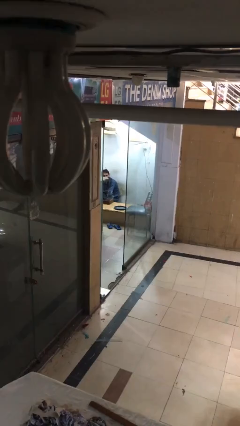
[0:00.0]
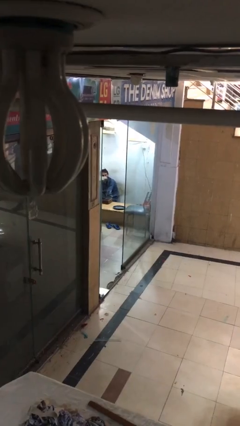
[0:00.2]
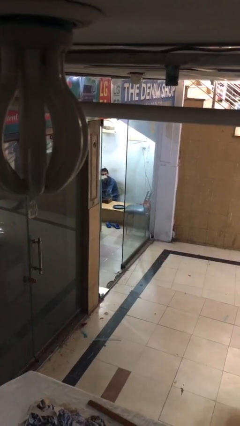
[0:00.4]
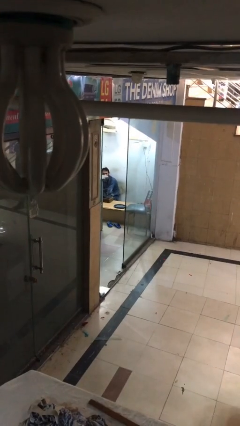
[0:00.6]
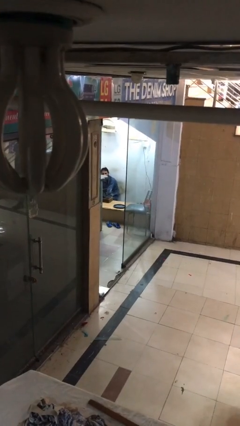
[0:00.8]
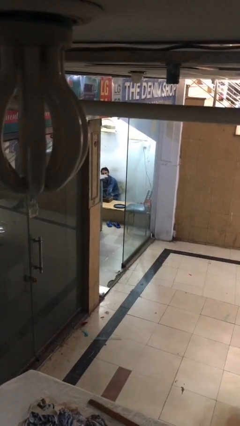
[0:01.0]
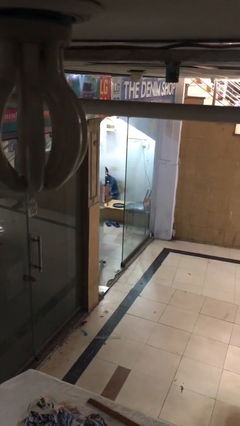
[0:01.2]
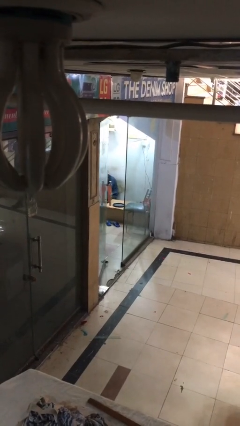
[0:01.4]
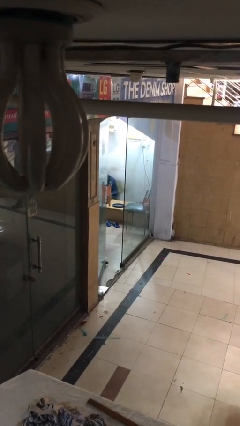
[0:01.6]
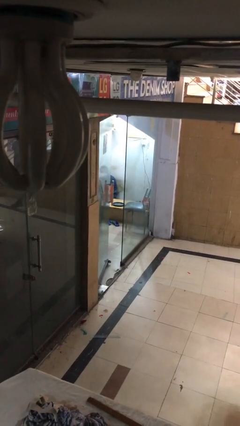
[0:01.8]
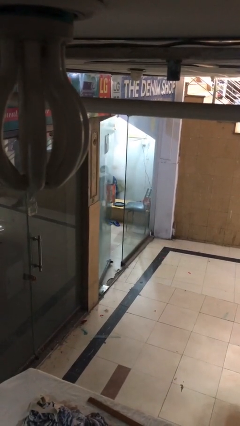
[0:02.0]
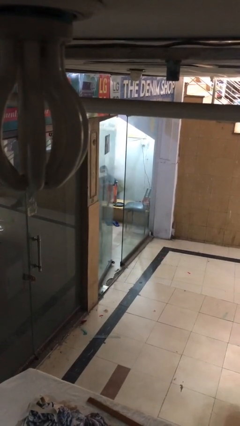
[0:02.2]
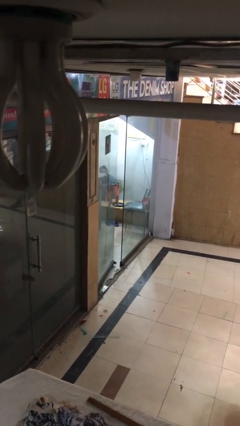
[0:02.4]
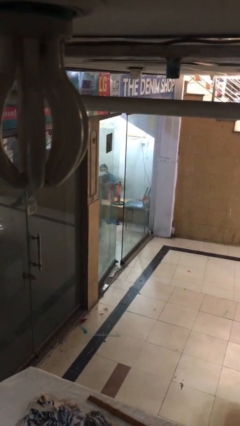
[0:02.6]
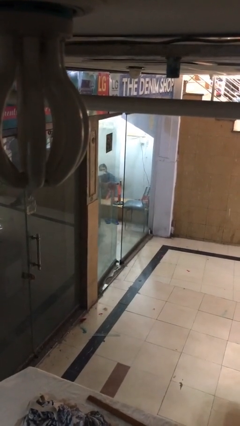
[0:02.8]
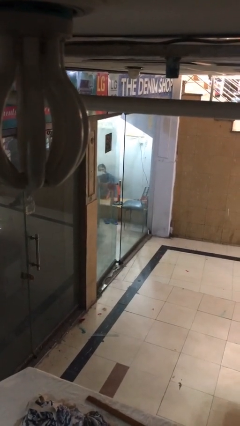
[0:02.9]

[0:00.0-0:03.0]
person closes facility door

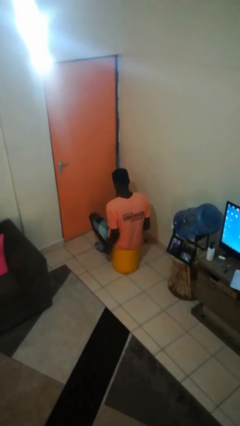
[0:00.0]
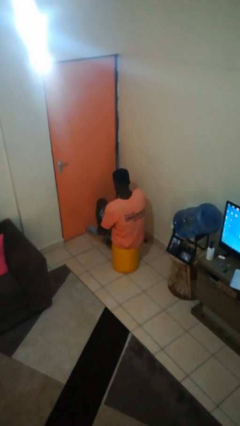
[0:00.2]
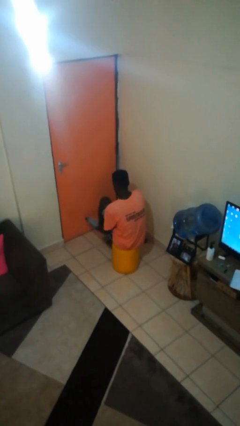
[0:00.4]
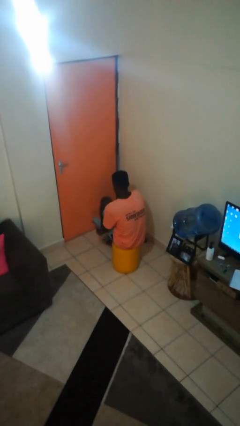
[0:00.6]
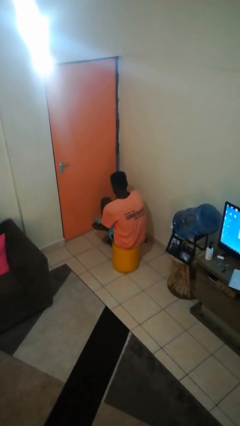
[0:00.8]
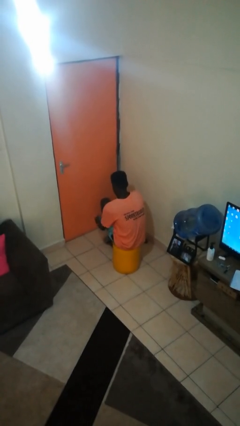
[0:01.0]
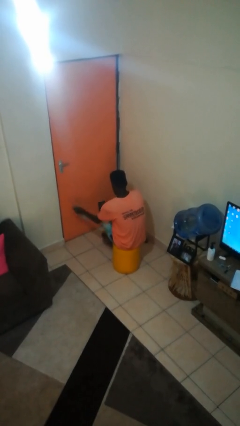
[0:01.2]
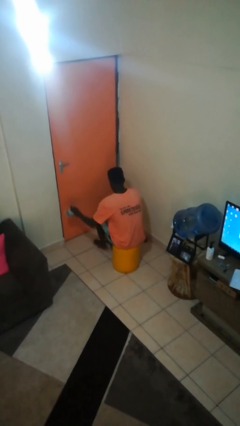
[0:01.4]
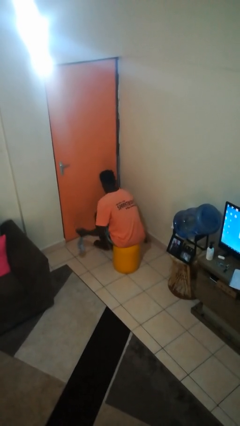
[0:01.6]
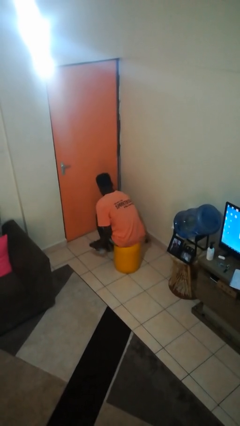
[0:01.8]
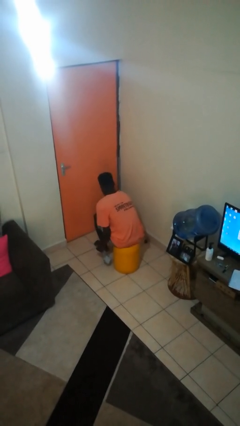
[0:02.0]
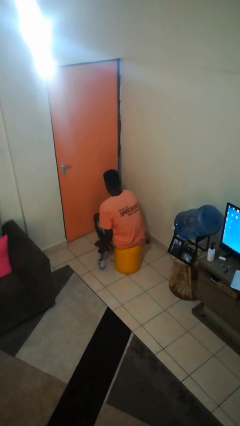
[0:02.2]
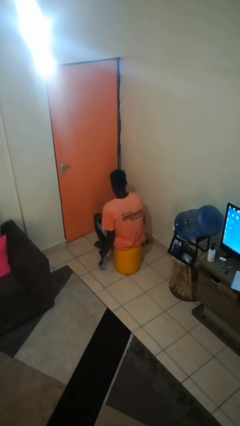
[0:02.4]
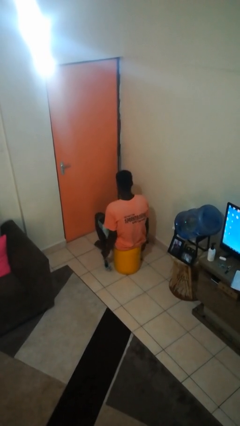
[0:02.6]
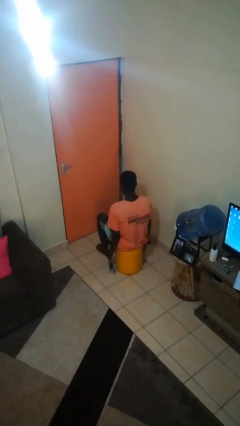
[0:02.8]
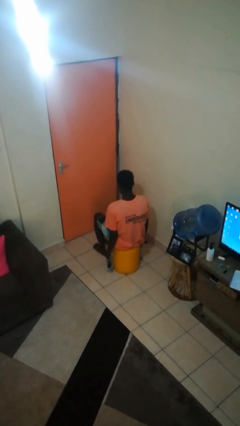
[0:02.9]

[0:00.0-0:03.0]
person takes off socks

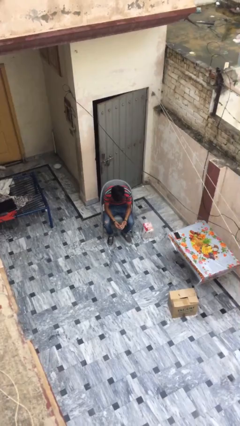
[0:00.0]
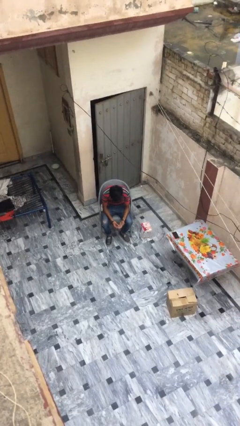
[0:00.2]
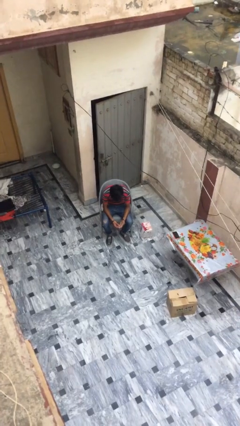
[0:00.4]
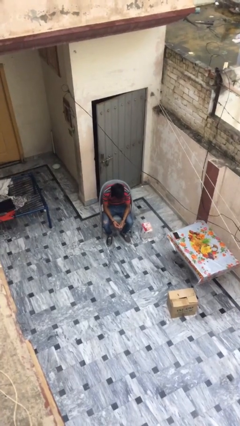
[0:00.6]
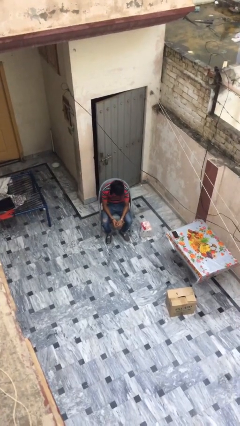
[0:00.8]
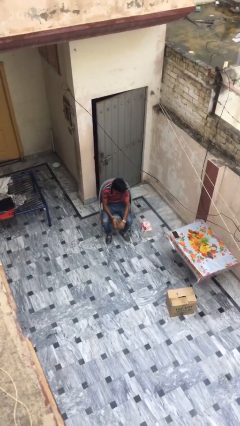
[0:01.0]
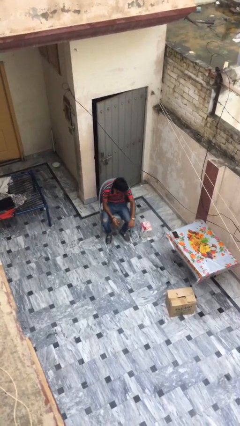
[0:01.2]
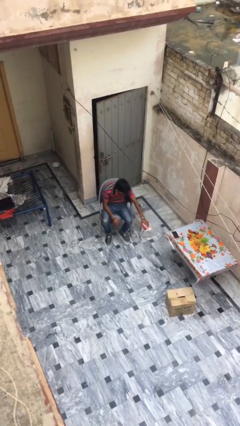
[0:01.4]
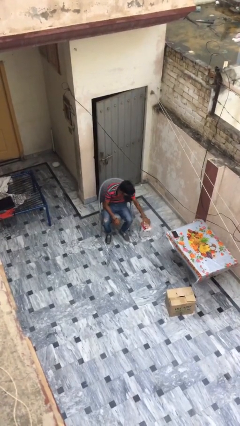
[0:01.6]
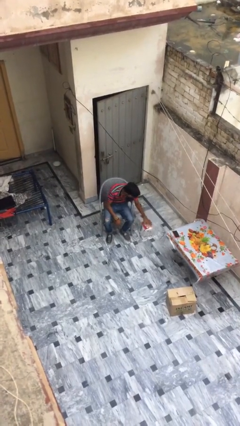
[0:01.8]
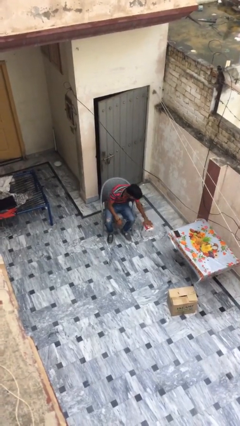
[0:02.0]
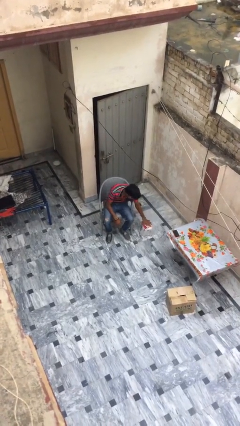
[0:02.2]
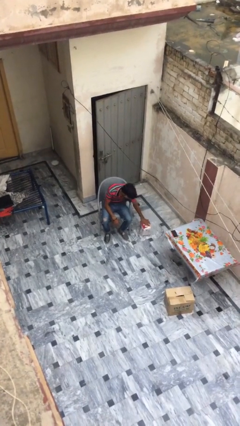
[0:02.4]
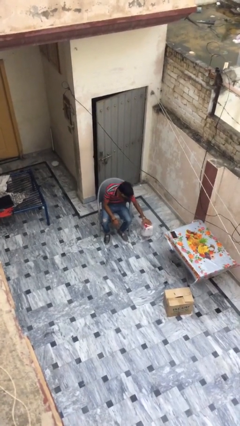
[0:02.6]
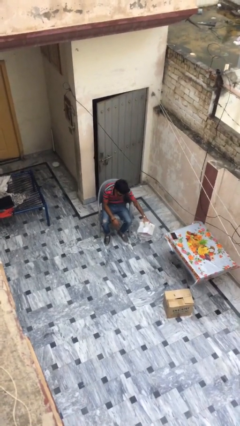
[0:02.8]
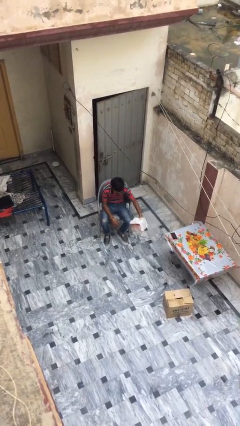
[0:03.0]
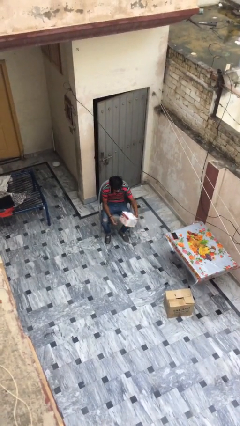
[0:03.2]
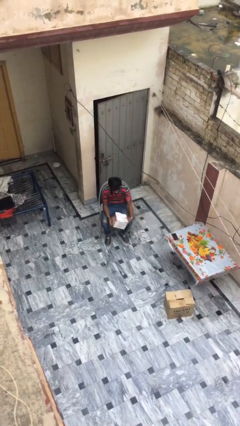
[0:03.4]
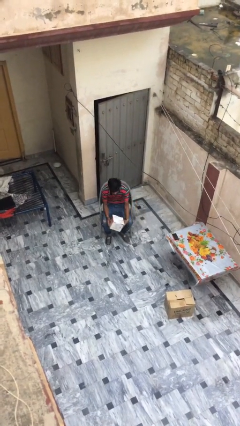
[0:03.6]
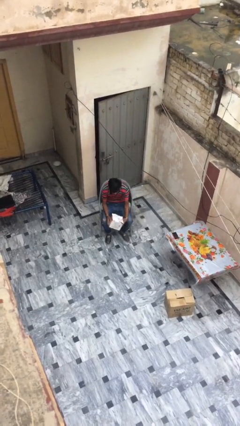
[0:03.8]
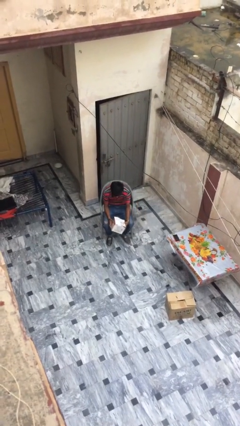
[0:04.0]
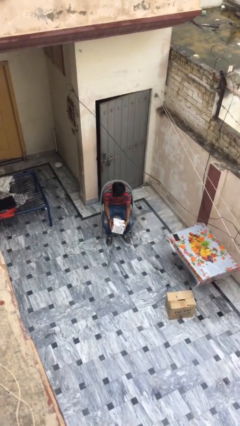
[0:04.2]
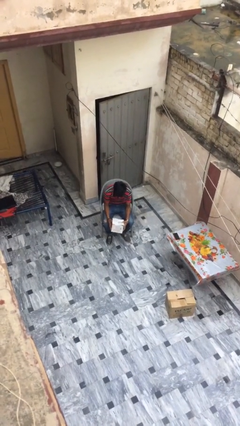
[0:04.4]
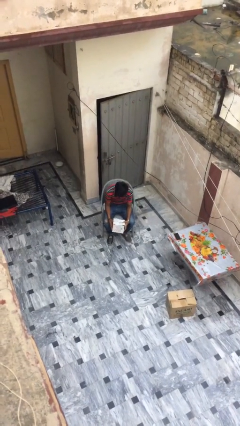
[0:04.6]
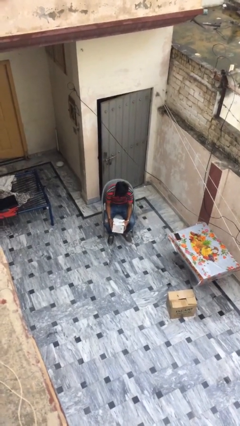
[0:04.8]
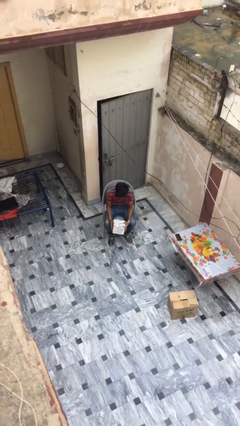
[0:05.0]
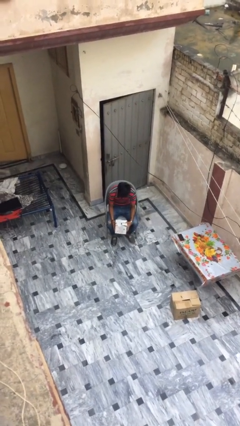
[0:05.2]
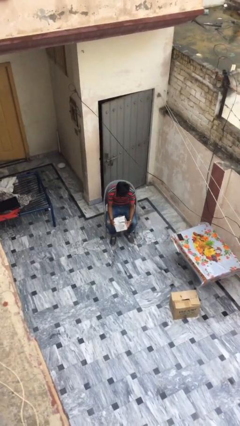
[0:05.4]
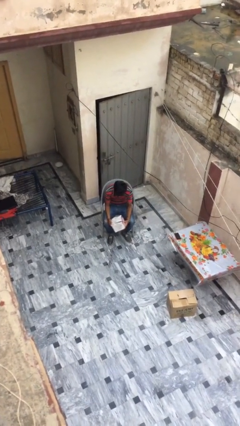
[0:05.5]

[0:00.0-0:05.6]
person picks up object from floor

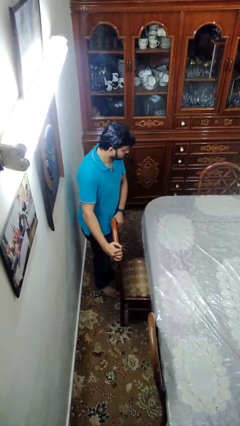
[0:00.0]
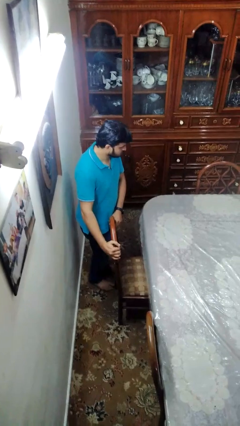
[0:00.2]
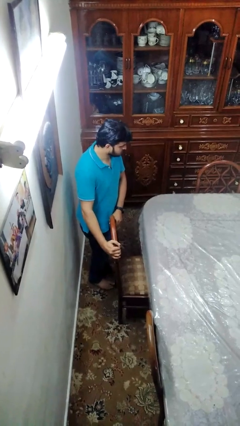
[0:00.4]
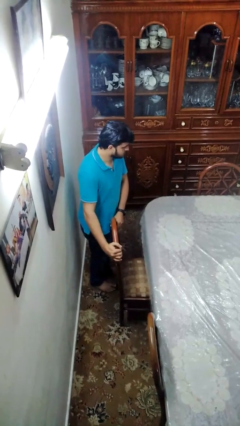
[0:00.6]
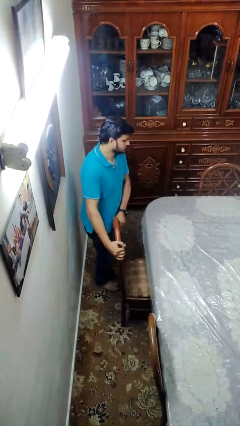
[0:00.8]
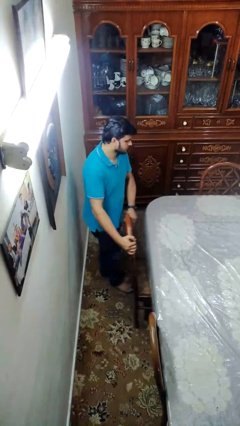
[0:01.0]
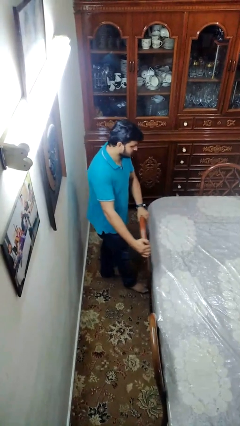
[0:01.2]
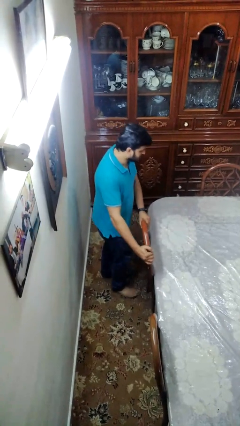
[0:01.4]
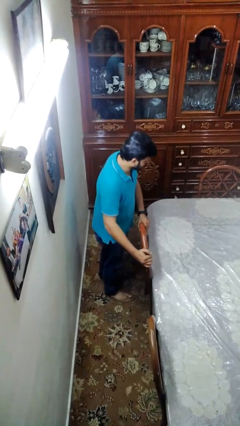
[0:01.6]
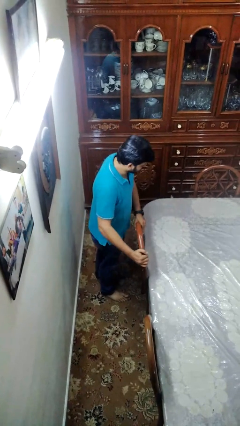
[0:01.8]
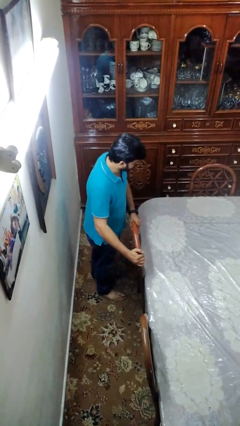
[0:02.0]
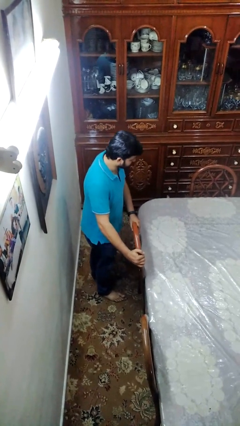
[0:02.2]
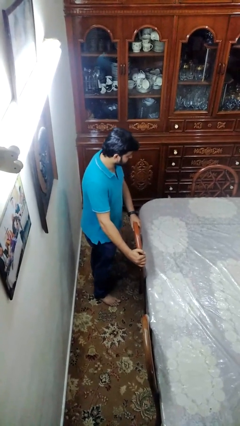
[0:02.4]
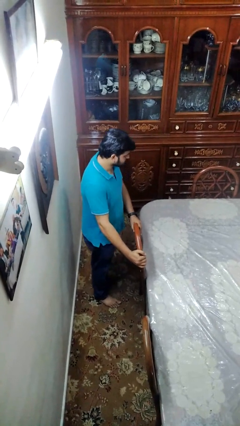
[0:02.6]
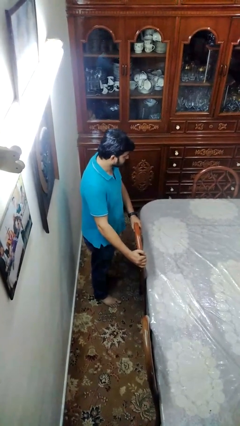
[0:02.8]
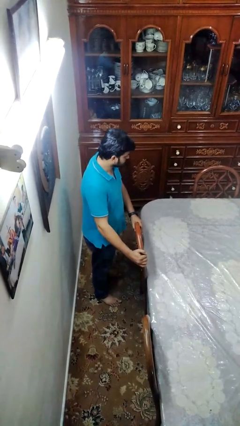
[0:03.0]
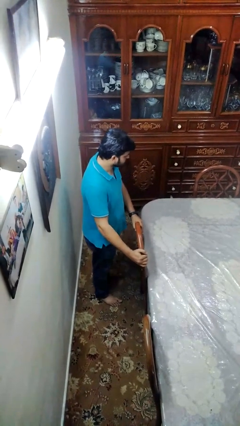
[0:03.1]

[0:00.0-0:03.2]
person pushes in chair

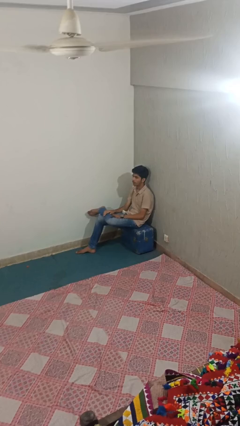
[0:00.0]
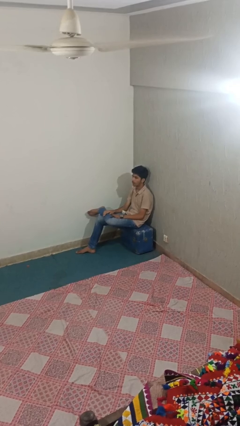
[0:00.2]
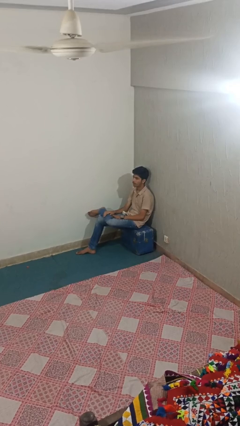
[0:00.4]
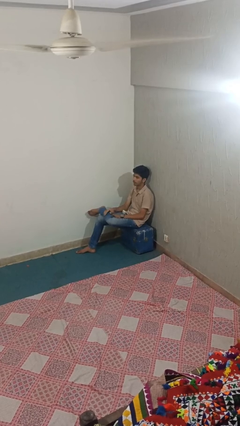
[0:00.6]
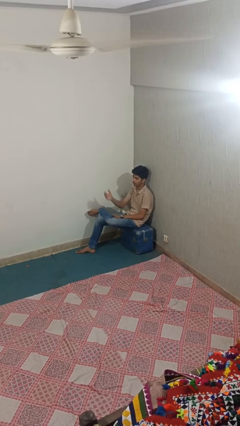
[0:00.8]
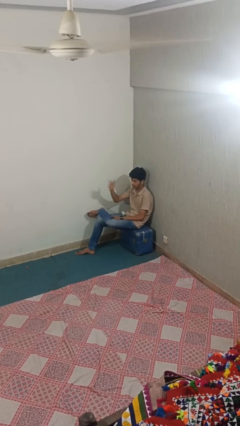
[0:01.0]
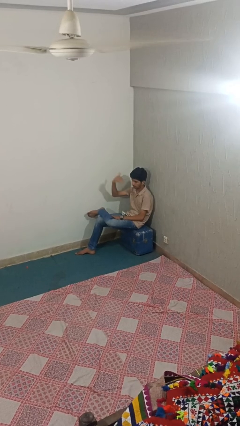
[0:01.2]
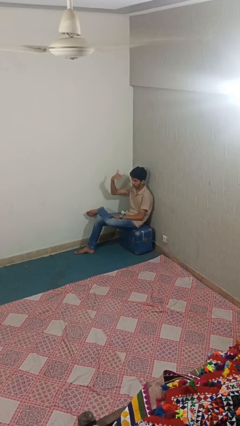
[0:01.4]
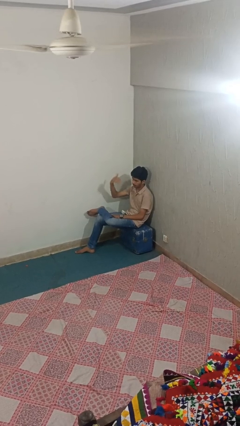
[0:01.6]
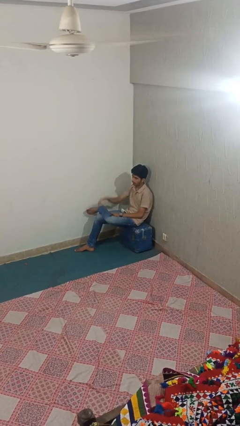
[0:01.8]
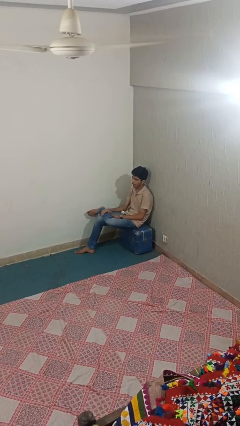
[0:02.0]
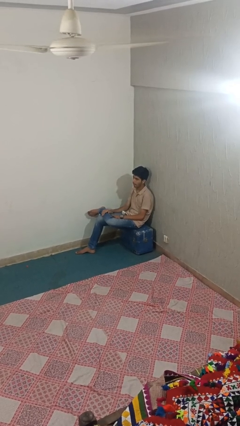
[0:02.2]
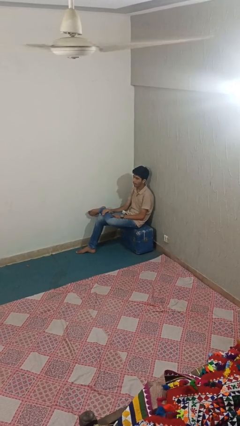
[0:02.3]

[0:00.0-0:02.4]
person gestures come here

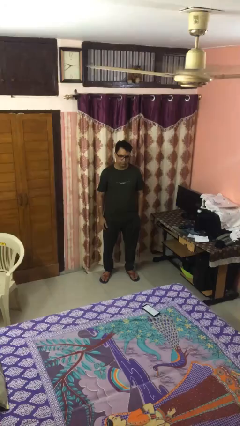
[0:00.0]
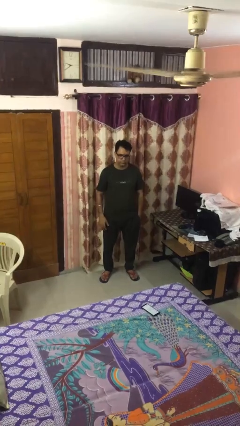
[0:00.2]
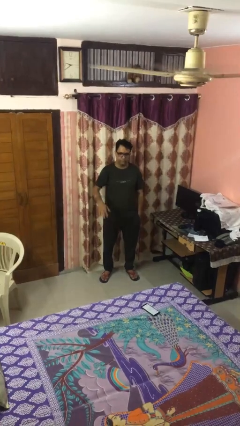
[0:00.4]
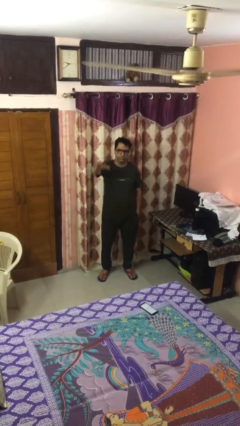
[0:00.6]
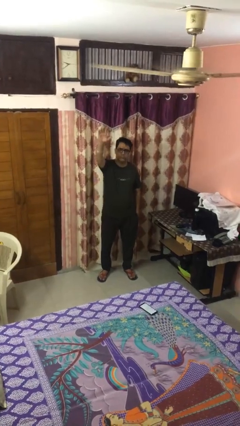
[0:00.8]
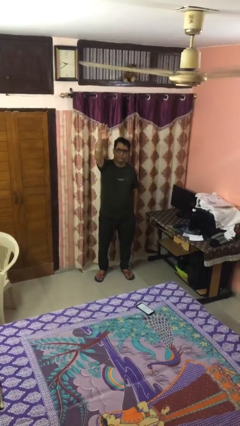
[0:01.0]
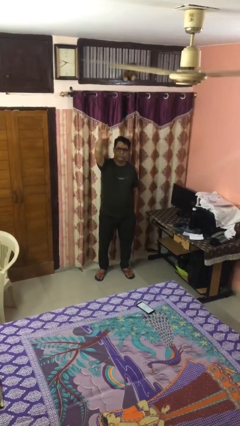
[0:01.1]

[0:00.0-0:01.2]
person gestures swipe up
